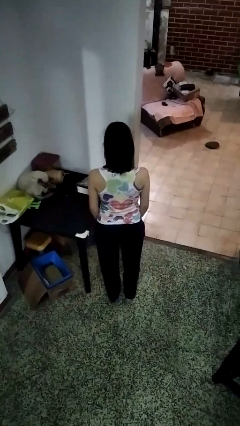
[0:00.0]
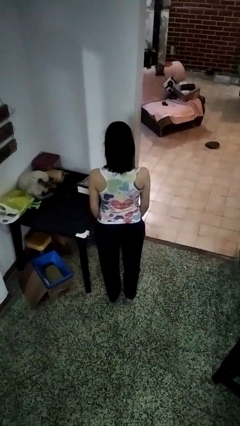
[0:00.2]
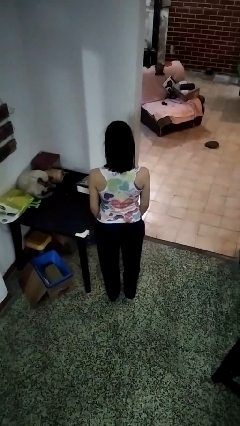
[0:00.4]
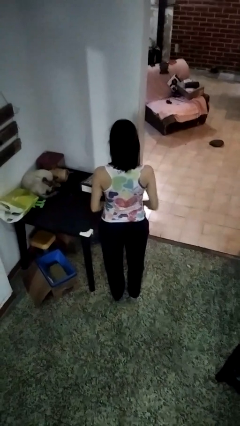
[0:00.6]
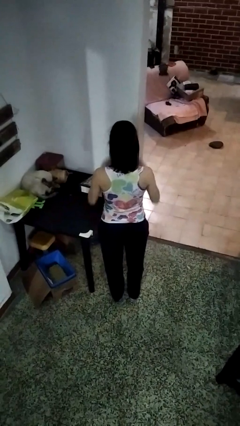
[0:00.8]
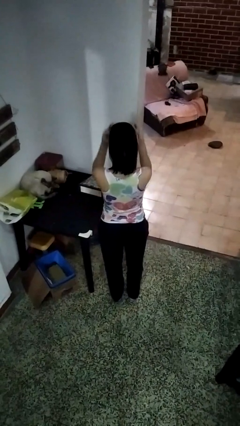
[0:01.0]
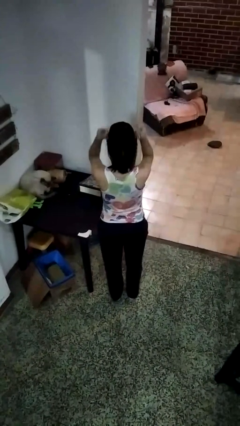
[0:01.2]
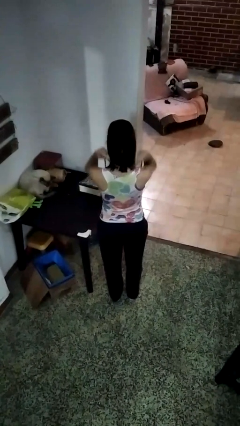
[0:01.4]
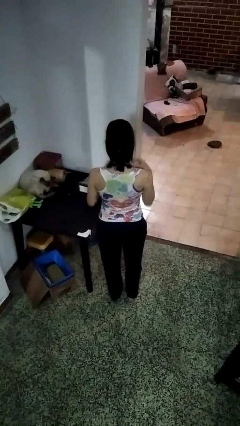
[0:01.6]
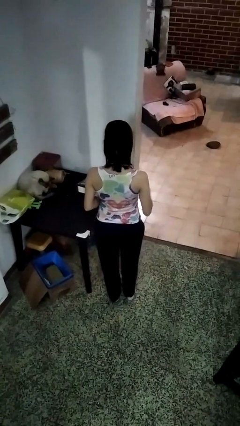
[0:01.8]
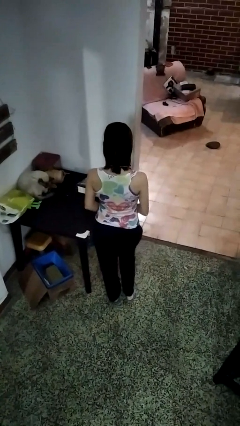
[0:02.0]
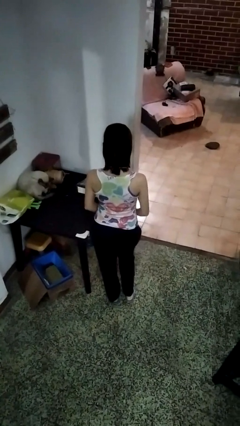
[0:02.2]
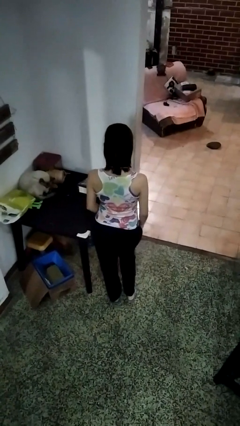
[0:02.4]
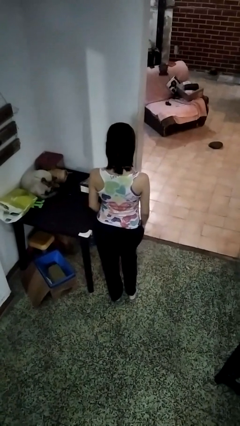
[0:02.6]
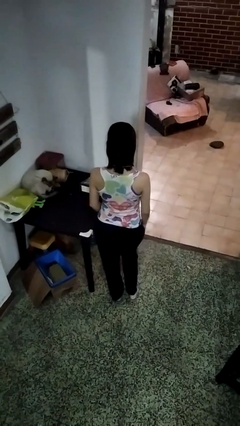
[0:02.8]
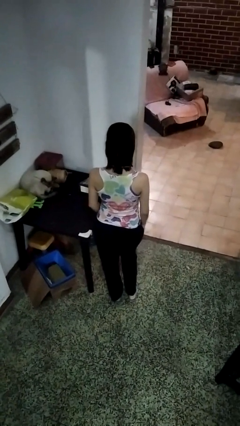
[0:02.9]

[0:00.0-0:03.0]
person puts on necklace

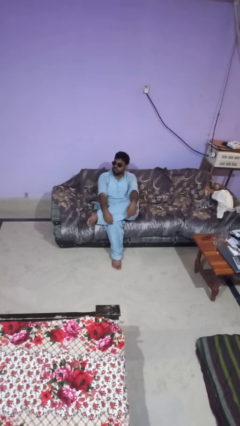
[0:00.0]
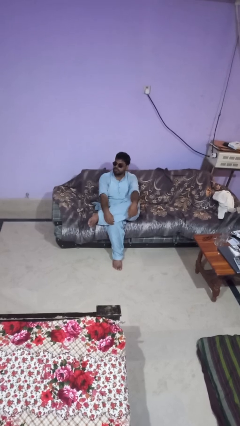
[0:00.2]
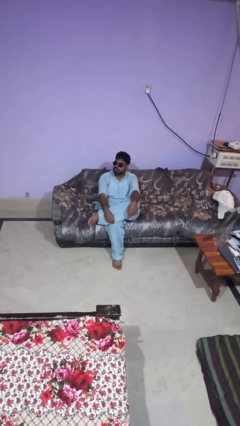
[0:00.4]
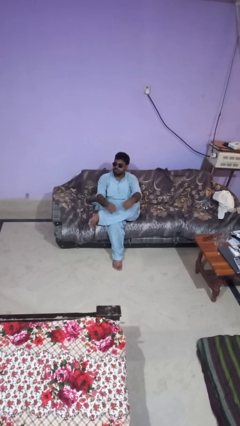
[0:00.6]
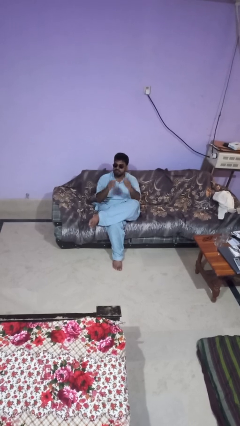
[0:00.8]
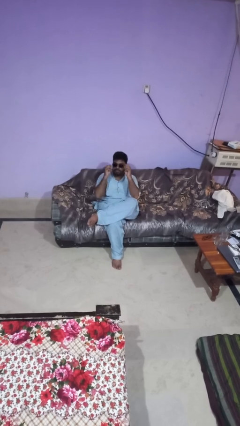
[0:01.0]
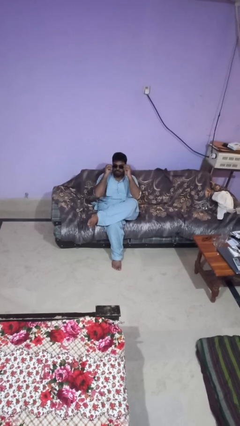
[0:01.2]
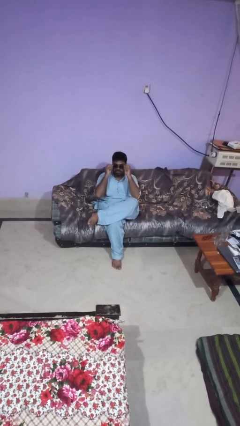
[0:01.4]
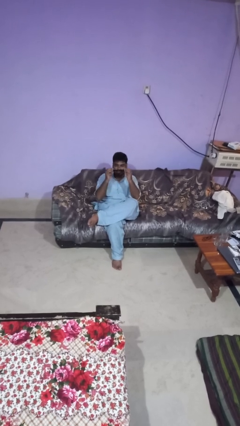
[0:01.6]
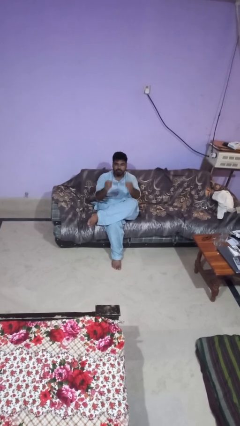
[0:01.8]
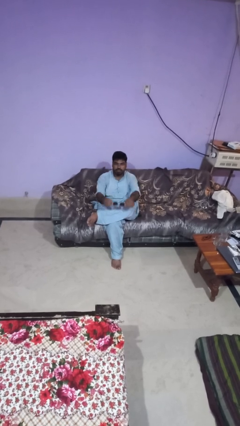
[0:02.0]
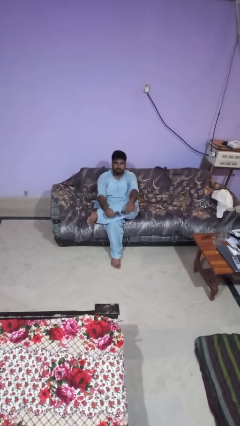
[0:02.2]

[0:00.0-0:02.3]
person takes off sunglasses

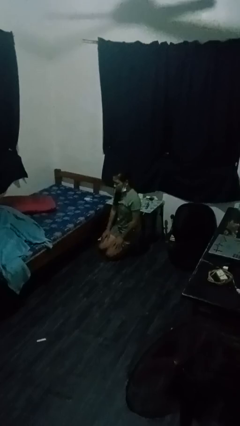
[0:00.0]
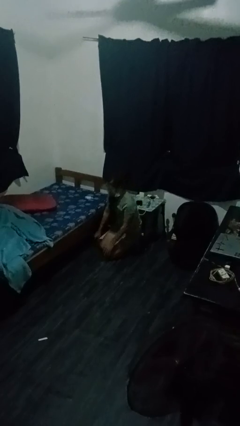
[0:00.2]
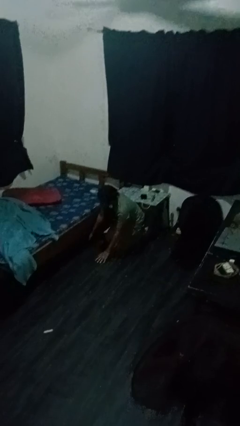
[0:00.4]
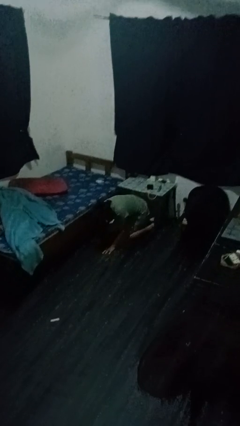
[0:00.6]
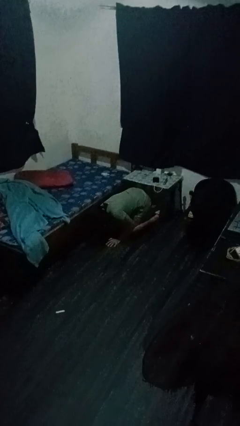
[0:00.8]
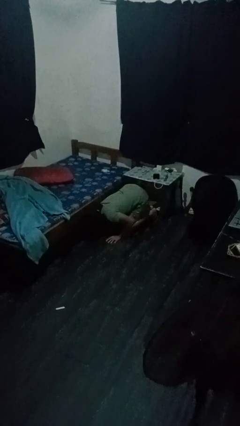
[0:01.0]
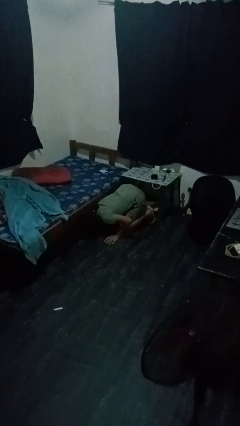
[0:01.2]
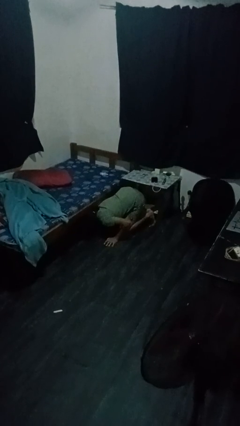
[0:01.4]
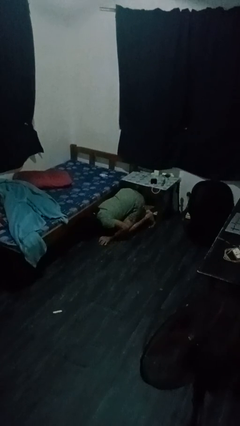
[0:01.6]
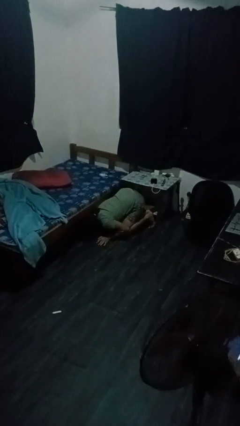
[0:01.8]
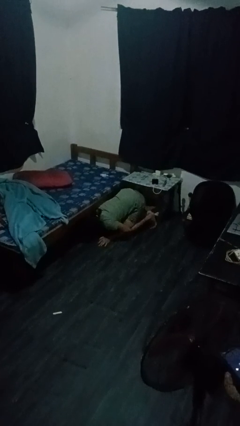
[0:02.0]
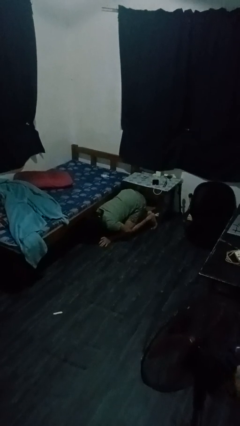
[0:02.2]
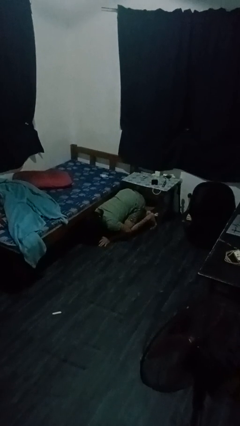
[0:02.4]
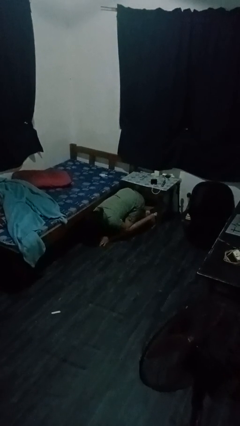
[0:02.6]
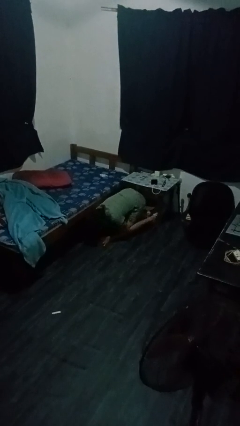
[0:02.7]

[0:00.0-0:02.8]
person searches under bed

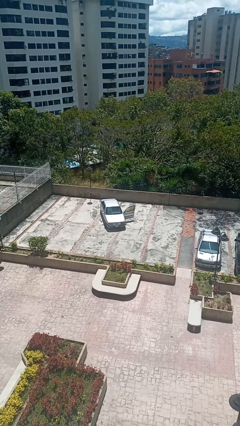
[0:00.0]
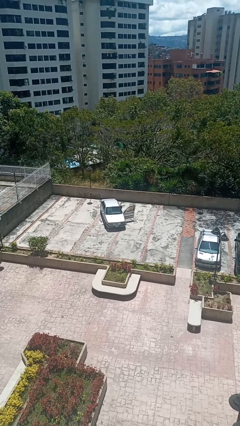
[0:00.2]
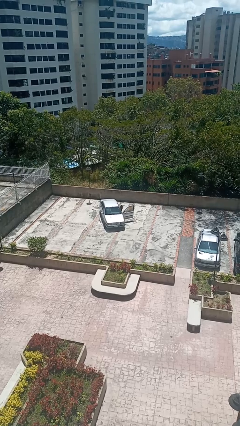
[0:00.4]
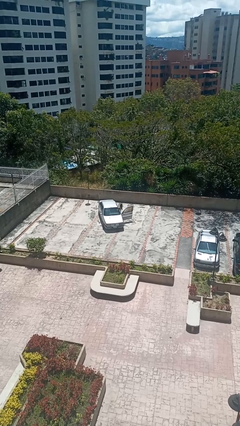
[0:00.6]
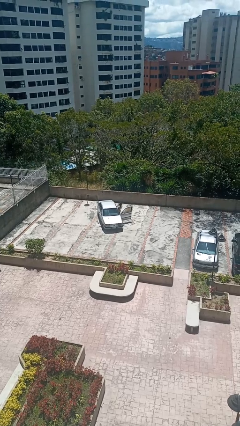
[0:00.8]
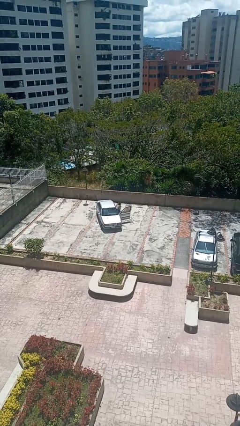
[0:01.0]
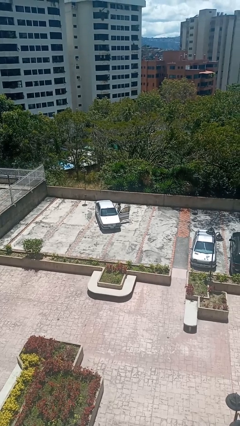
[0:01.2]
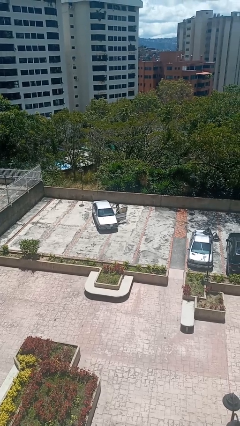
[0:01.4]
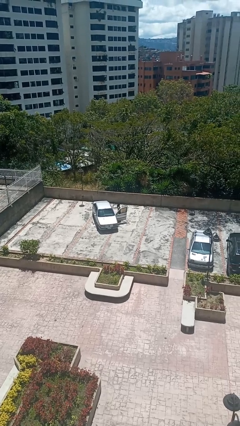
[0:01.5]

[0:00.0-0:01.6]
person exits car

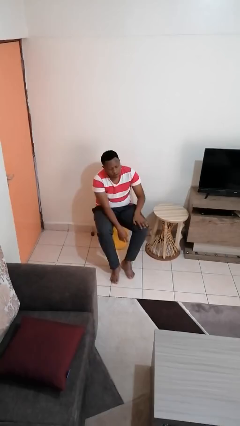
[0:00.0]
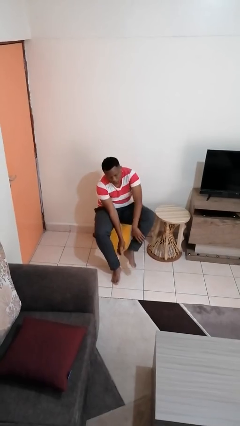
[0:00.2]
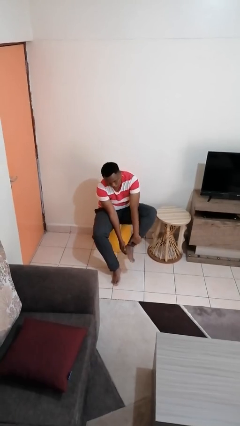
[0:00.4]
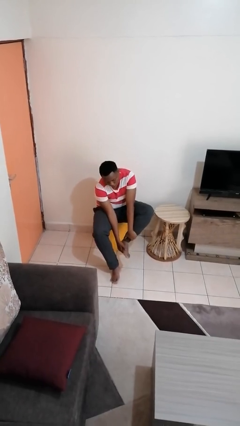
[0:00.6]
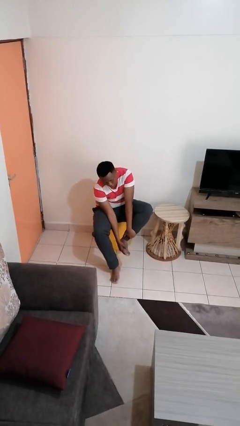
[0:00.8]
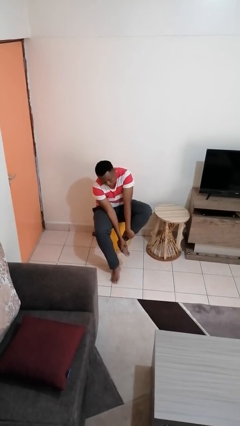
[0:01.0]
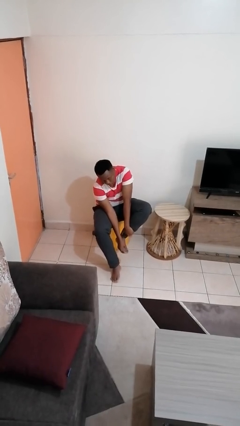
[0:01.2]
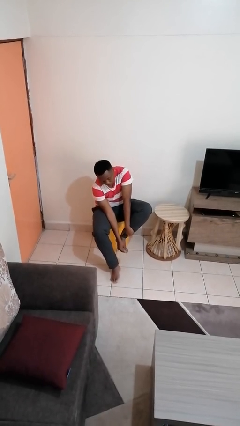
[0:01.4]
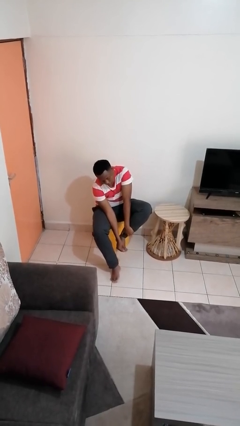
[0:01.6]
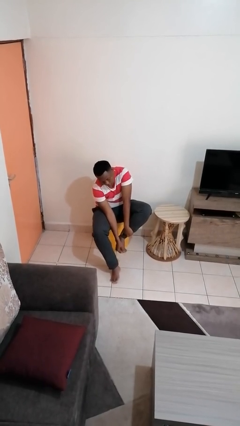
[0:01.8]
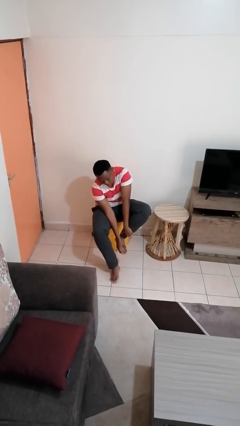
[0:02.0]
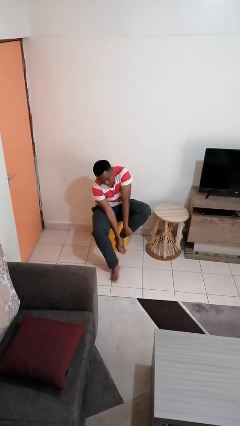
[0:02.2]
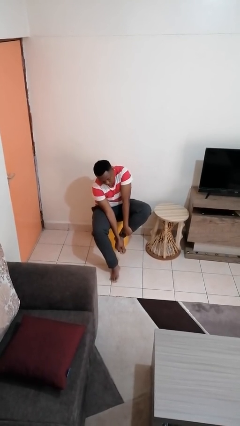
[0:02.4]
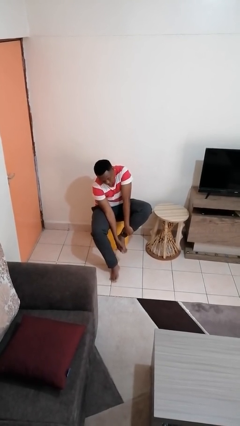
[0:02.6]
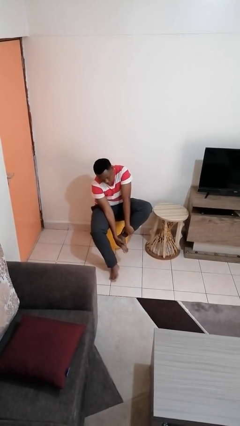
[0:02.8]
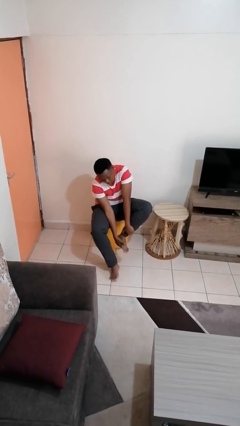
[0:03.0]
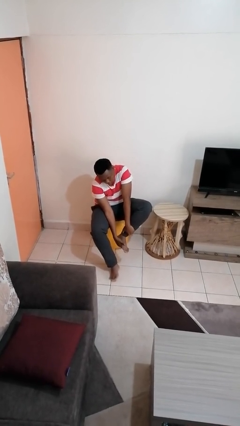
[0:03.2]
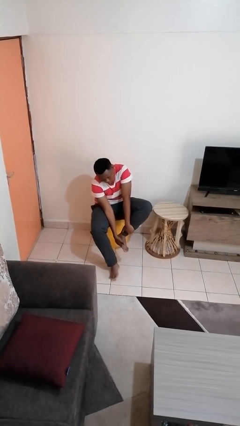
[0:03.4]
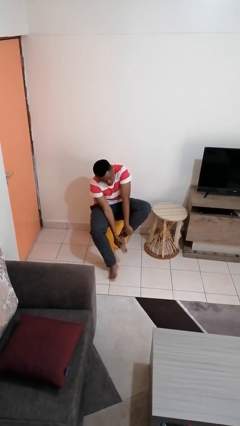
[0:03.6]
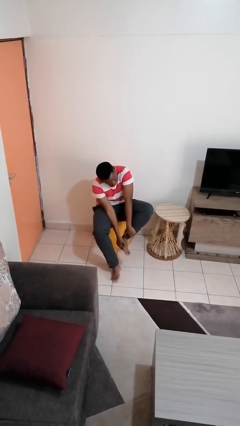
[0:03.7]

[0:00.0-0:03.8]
person rubs foot

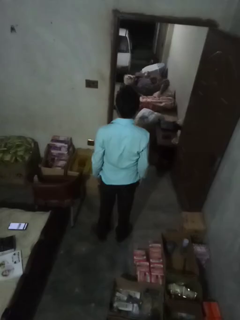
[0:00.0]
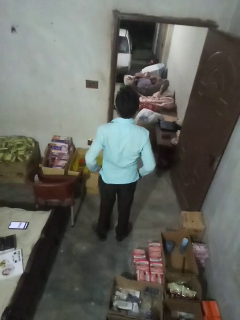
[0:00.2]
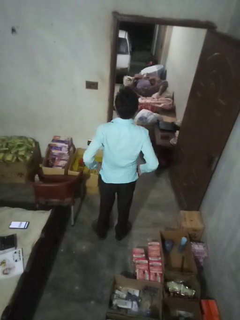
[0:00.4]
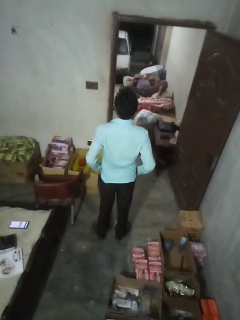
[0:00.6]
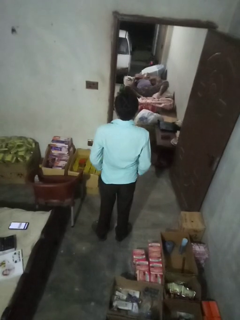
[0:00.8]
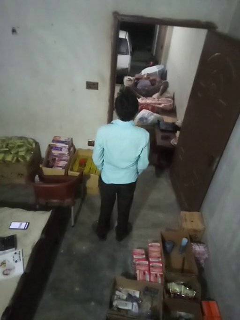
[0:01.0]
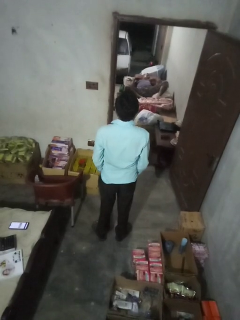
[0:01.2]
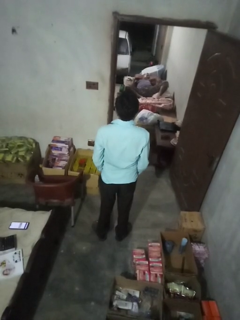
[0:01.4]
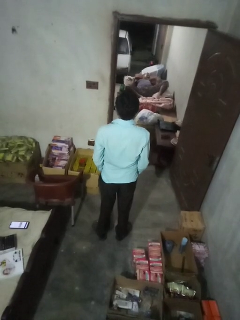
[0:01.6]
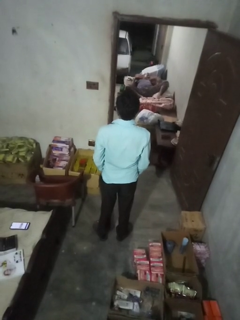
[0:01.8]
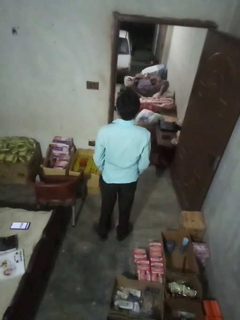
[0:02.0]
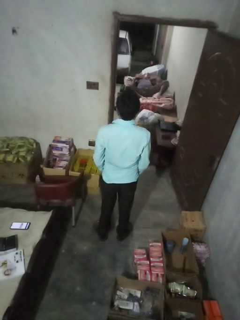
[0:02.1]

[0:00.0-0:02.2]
person puts hands in back pockets

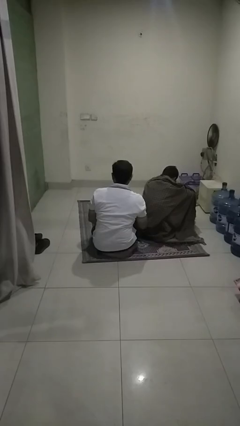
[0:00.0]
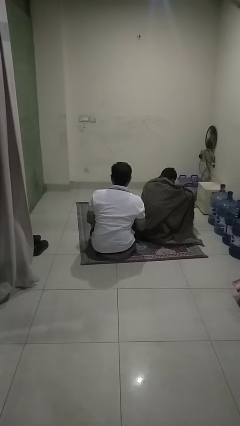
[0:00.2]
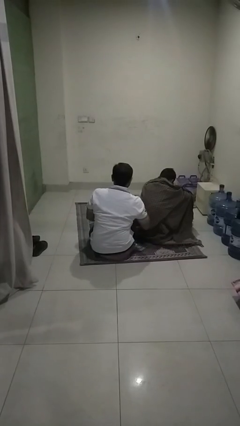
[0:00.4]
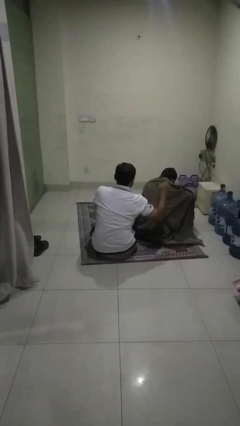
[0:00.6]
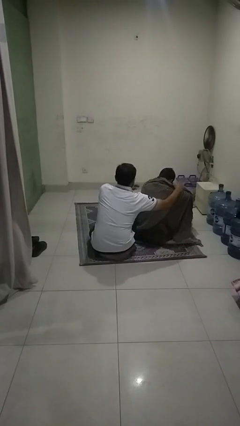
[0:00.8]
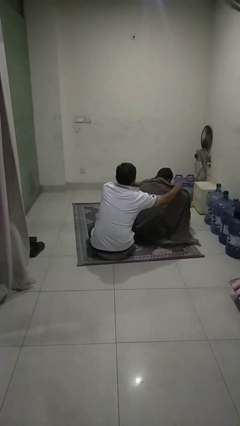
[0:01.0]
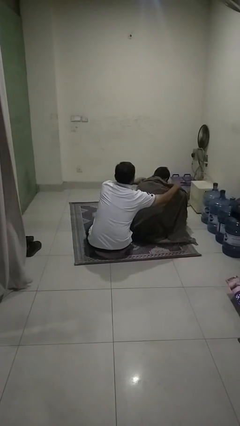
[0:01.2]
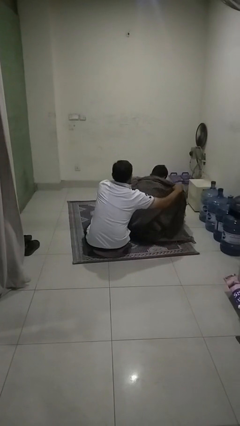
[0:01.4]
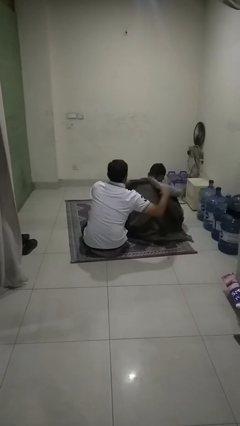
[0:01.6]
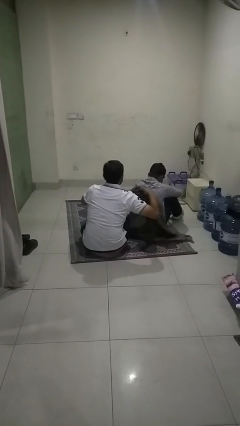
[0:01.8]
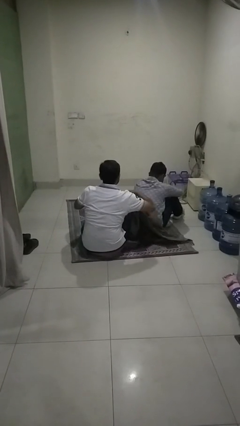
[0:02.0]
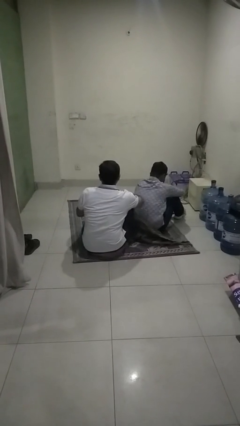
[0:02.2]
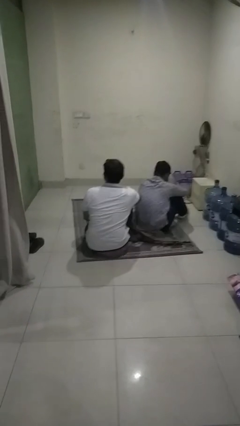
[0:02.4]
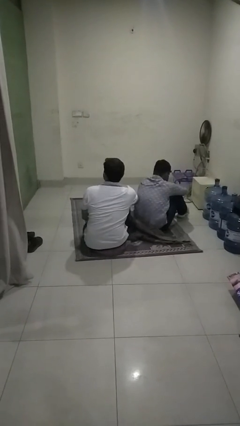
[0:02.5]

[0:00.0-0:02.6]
person uncovers friend with blanket
